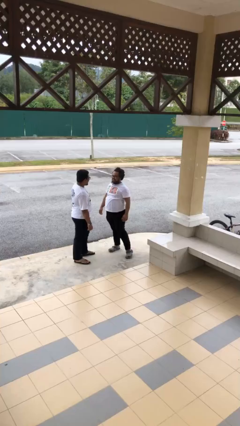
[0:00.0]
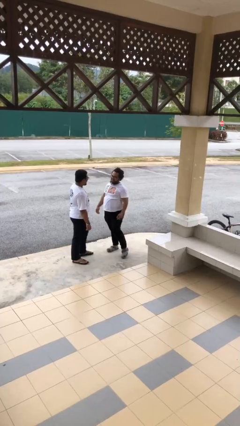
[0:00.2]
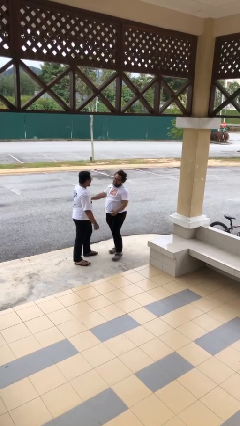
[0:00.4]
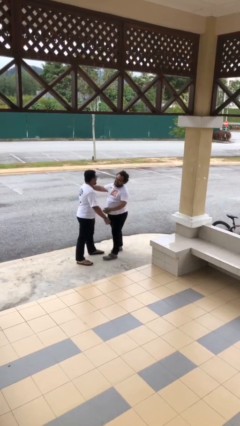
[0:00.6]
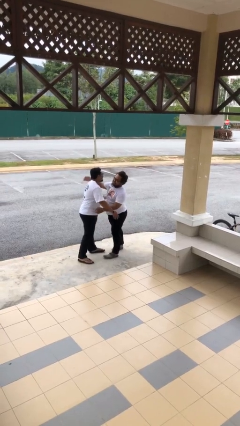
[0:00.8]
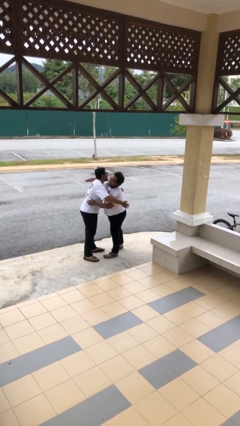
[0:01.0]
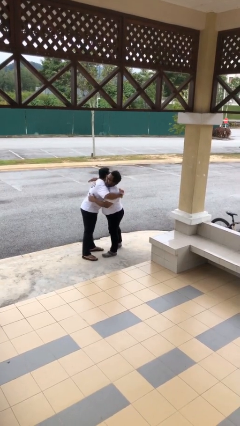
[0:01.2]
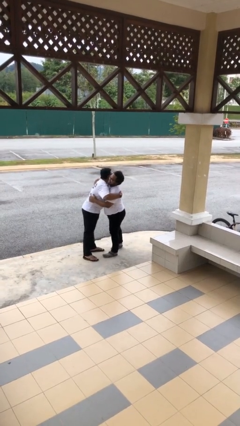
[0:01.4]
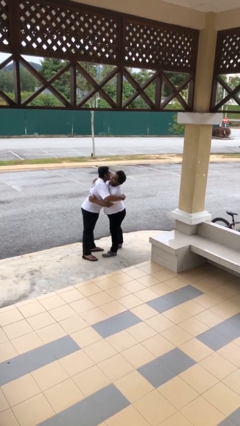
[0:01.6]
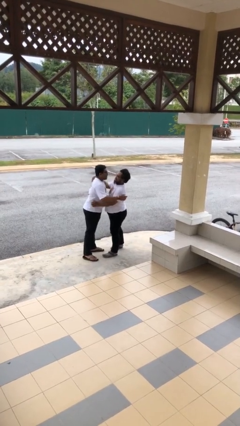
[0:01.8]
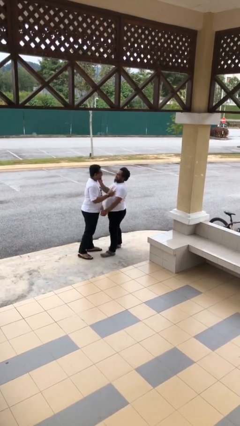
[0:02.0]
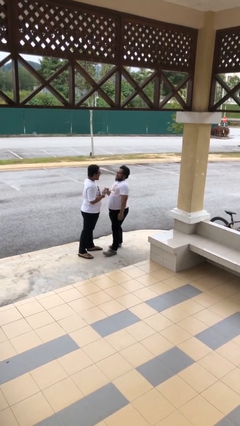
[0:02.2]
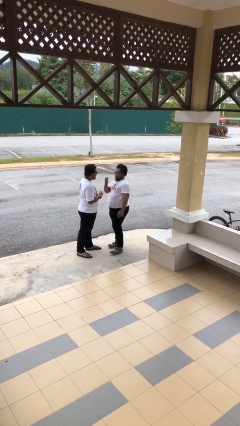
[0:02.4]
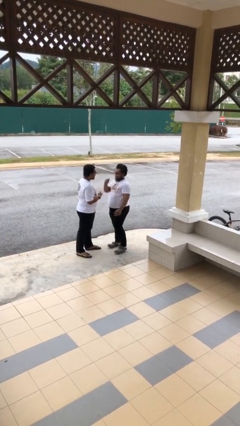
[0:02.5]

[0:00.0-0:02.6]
person embraces person

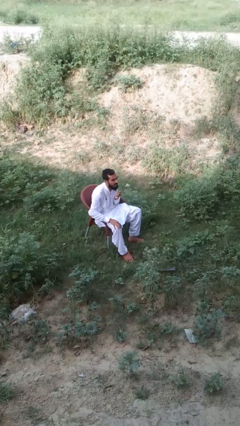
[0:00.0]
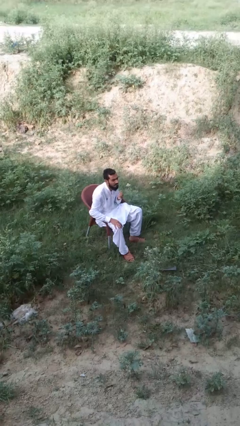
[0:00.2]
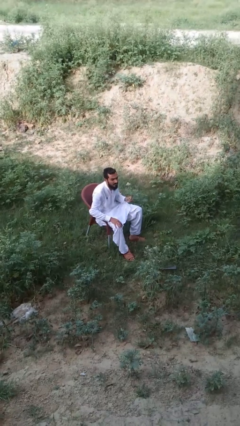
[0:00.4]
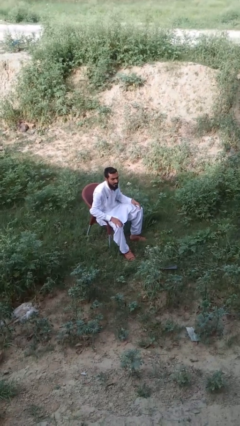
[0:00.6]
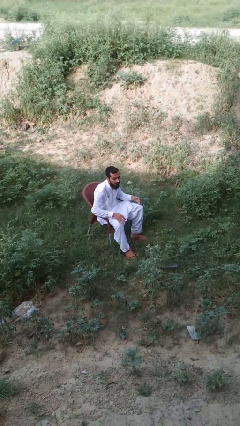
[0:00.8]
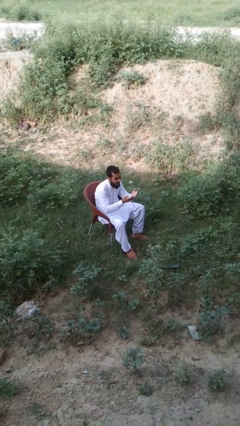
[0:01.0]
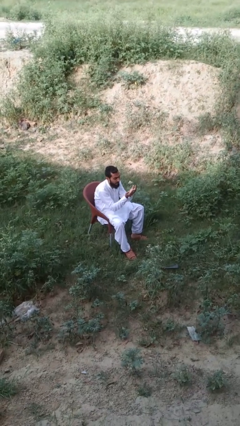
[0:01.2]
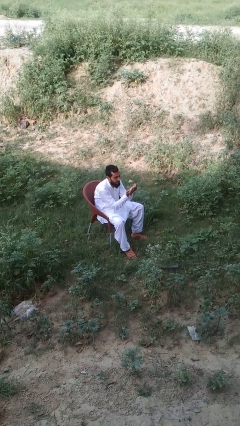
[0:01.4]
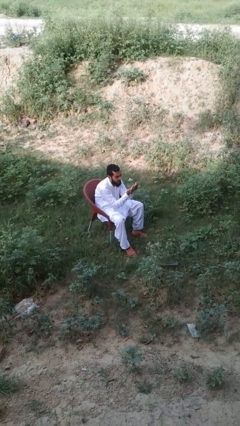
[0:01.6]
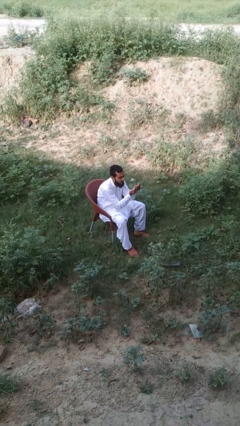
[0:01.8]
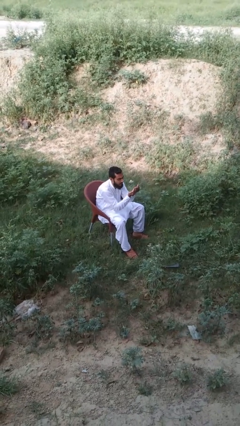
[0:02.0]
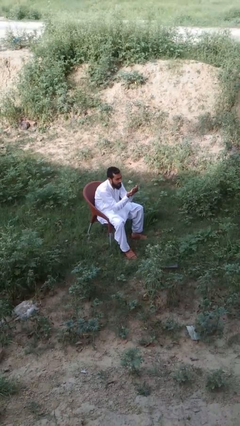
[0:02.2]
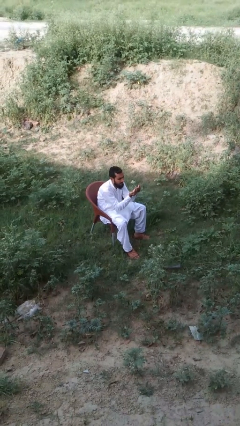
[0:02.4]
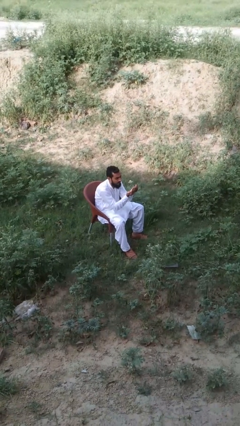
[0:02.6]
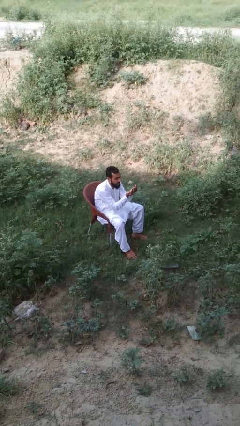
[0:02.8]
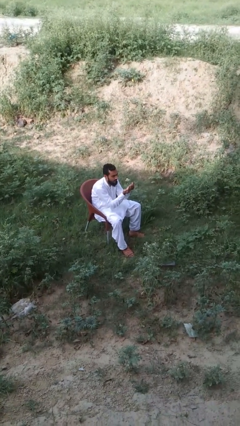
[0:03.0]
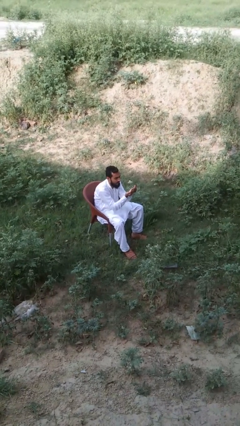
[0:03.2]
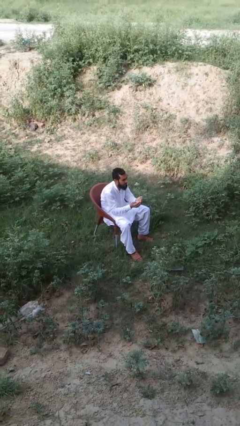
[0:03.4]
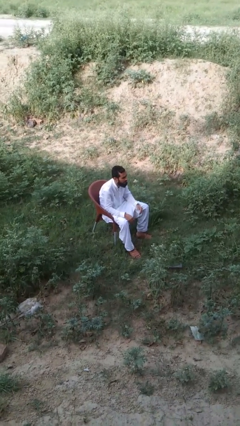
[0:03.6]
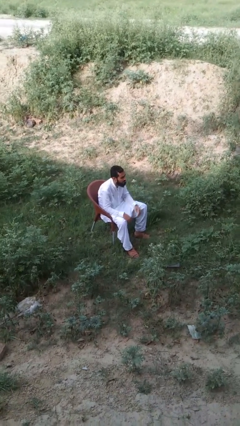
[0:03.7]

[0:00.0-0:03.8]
person prays

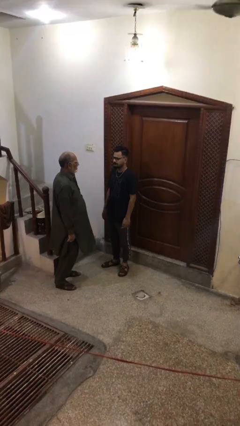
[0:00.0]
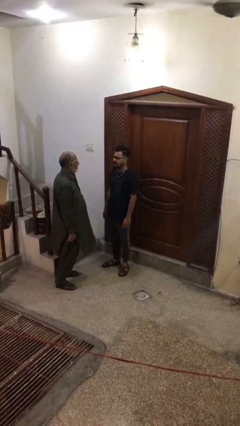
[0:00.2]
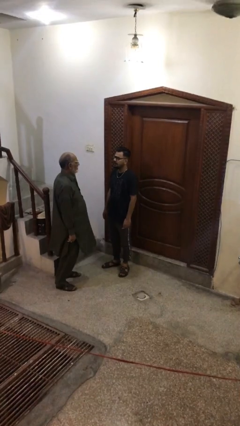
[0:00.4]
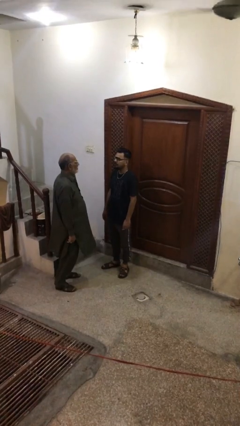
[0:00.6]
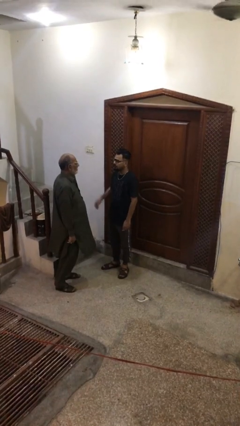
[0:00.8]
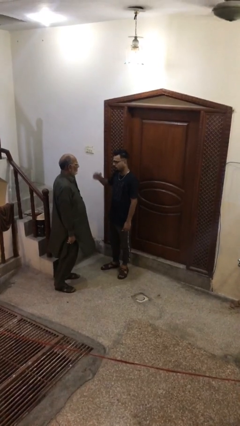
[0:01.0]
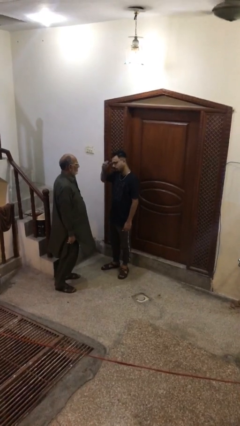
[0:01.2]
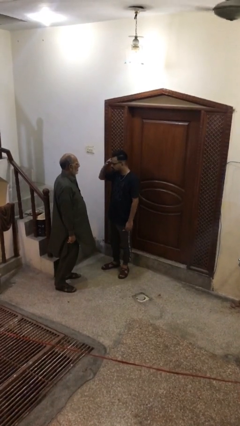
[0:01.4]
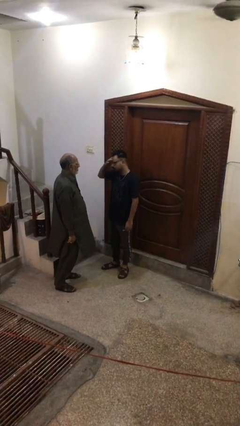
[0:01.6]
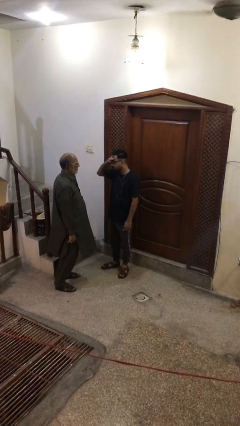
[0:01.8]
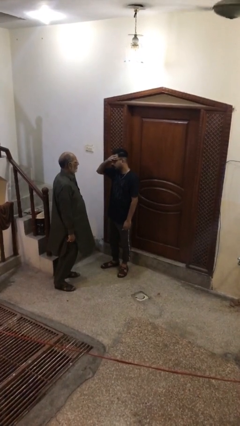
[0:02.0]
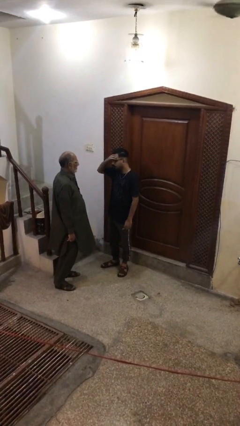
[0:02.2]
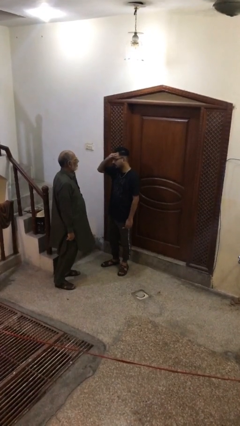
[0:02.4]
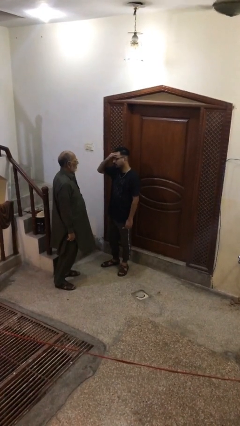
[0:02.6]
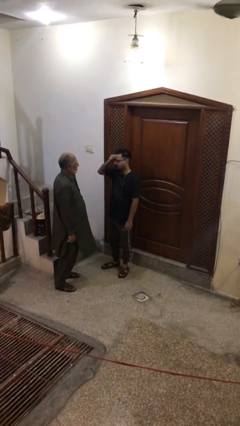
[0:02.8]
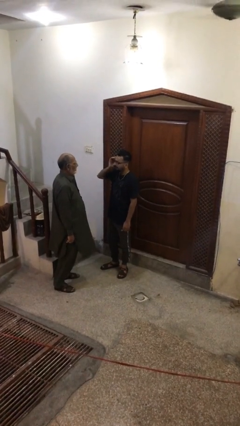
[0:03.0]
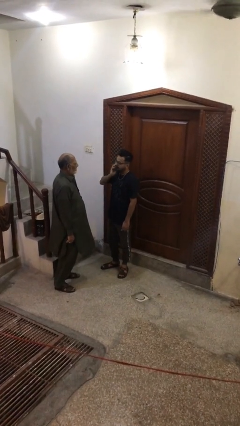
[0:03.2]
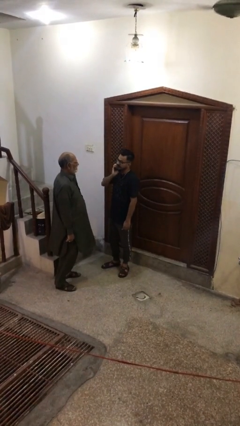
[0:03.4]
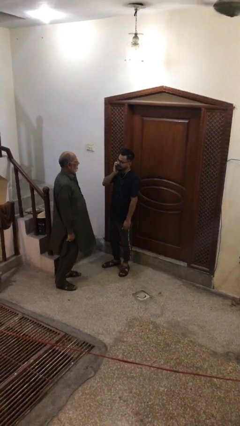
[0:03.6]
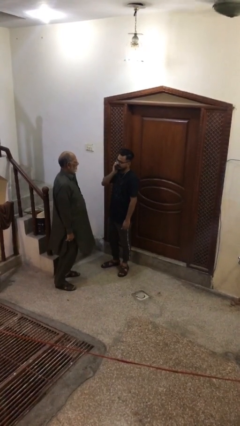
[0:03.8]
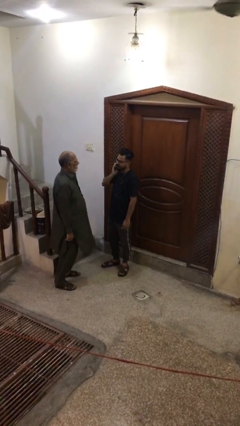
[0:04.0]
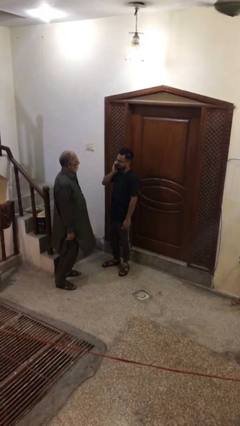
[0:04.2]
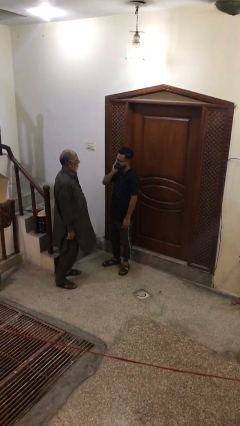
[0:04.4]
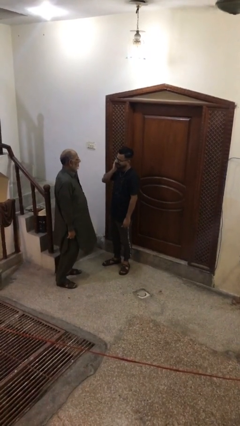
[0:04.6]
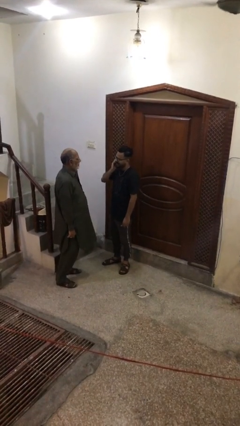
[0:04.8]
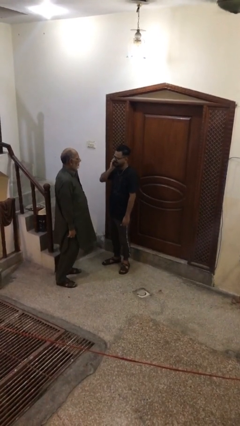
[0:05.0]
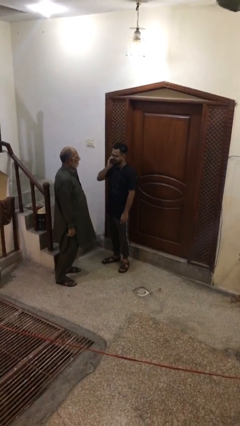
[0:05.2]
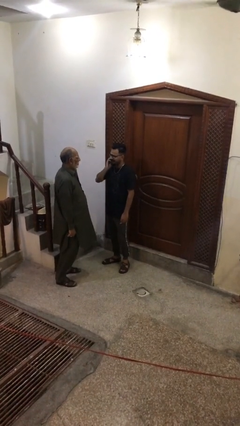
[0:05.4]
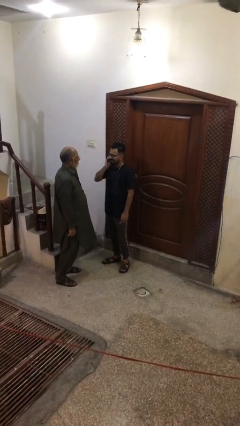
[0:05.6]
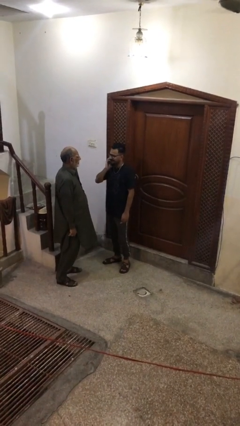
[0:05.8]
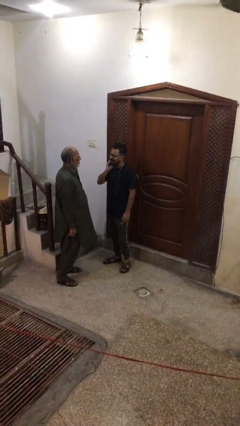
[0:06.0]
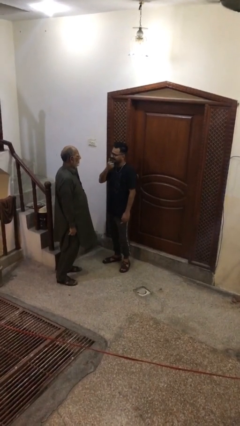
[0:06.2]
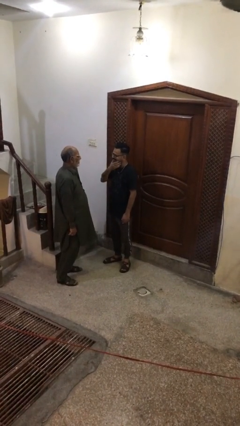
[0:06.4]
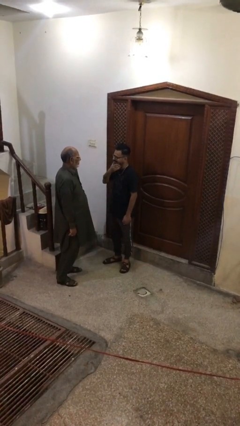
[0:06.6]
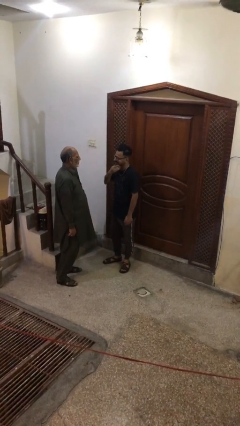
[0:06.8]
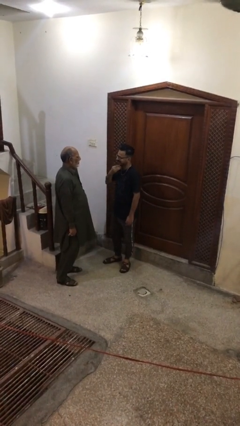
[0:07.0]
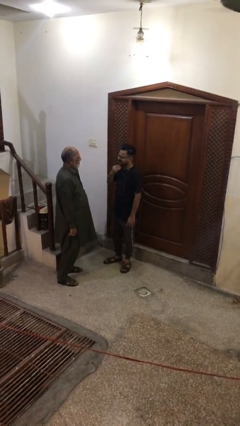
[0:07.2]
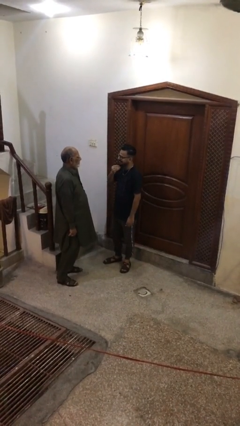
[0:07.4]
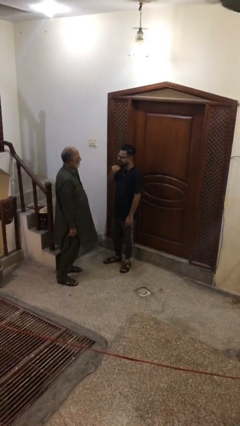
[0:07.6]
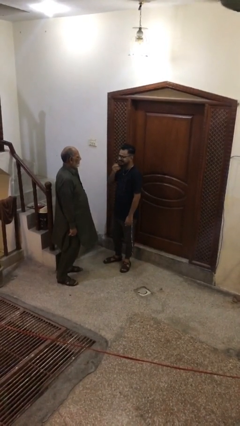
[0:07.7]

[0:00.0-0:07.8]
person talks to person

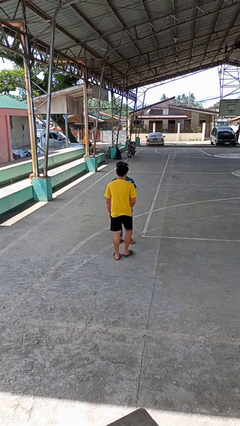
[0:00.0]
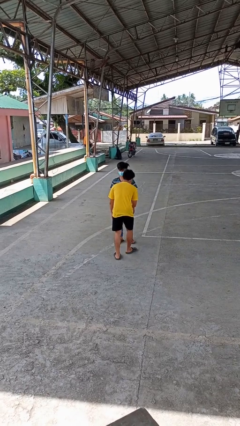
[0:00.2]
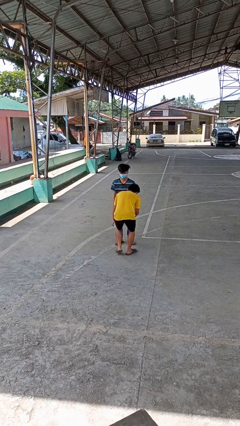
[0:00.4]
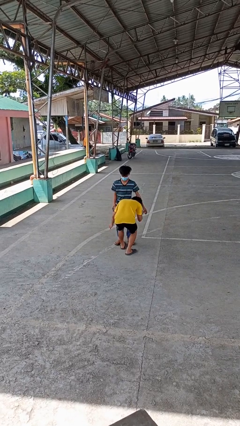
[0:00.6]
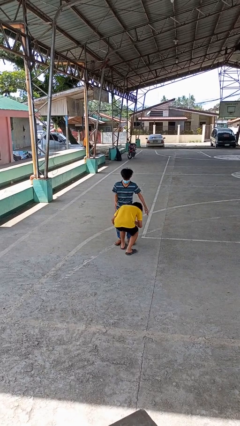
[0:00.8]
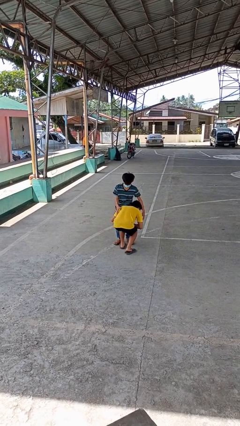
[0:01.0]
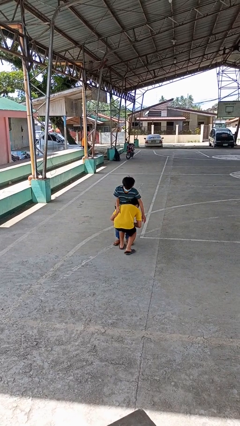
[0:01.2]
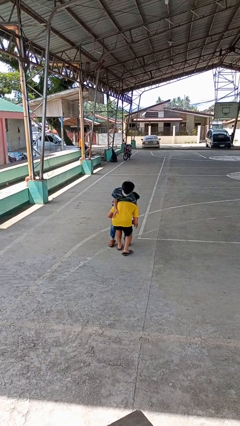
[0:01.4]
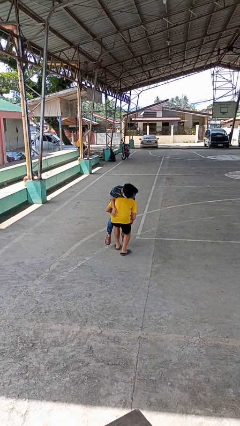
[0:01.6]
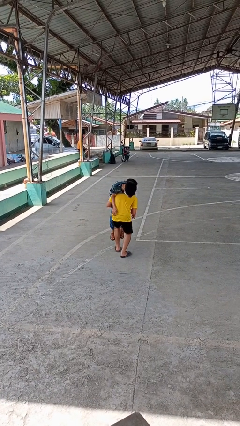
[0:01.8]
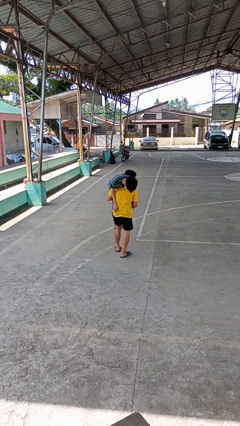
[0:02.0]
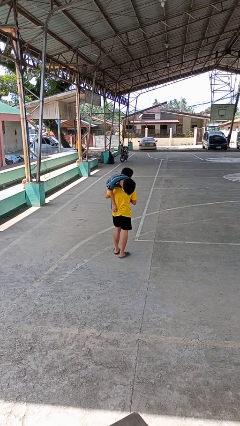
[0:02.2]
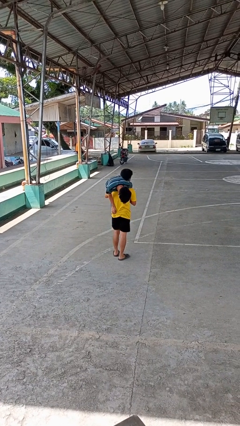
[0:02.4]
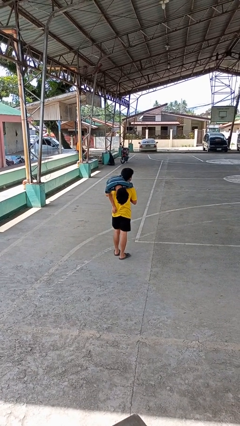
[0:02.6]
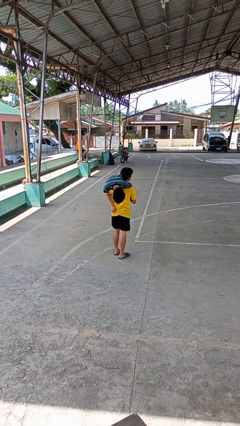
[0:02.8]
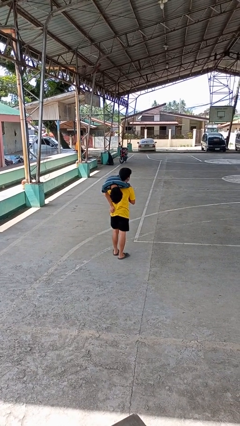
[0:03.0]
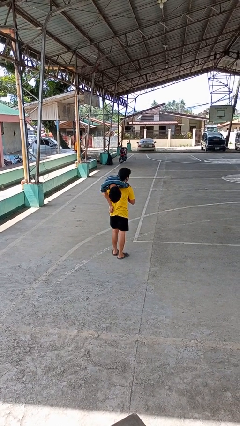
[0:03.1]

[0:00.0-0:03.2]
person carries person over shoulder

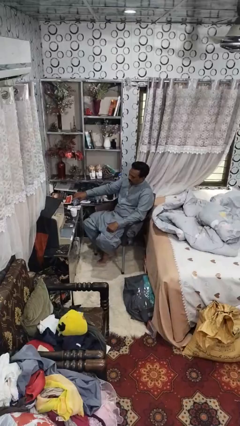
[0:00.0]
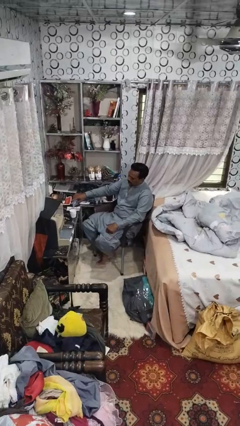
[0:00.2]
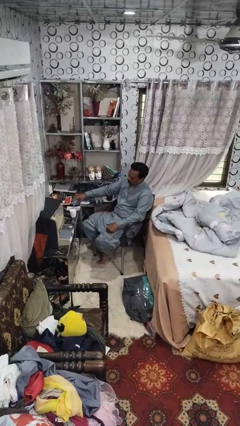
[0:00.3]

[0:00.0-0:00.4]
person pours liquid into cup
